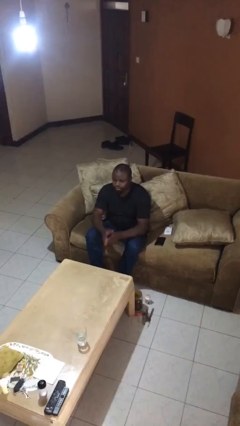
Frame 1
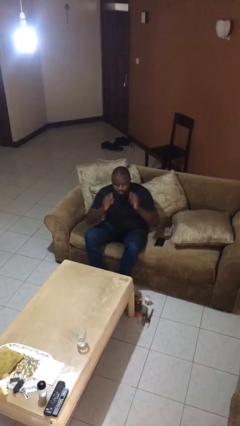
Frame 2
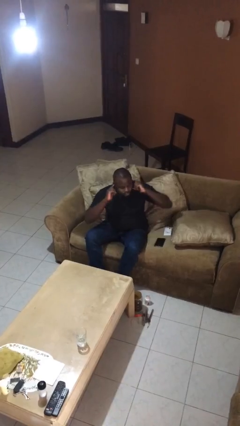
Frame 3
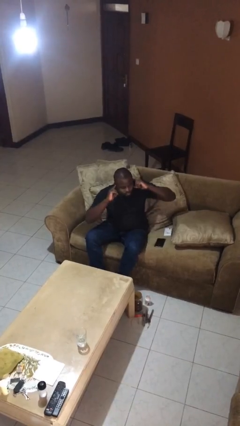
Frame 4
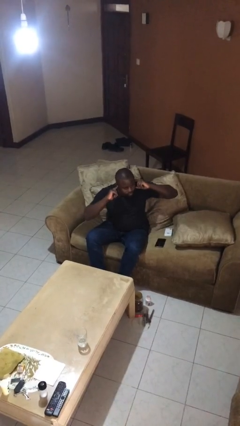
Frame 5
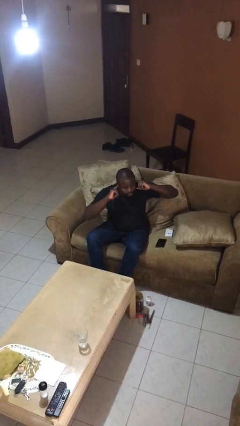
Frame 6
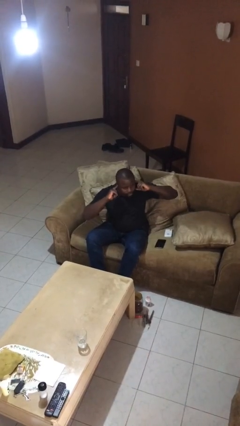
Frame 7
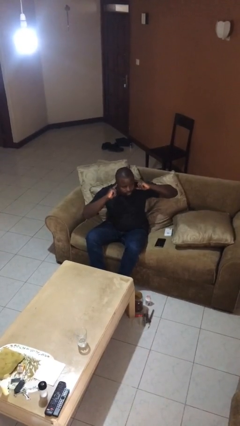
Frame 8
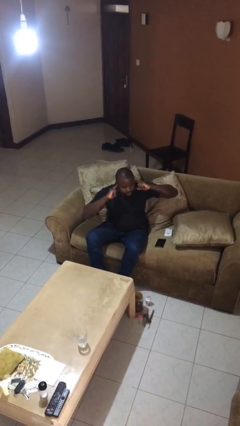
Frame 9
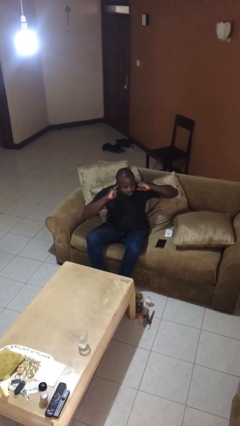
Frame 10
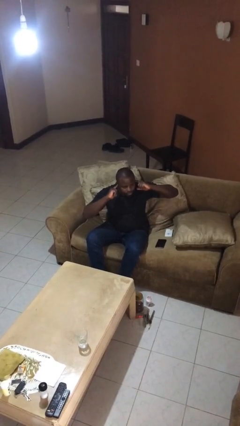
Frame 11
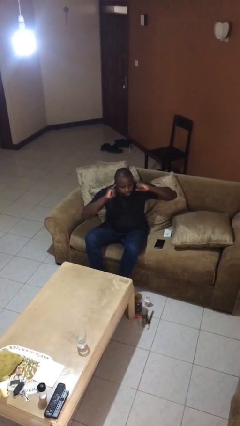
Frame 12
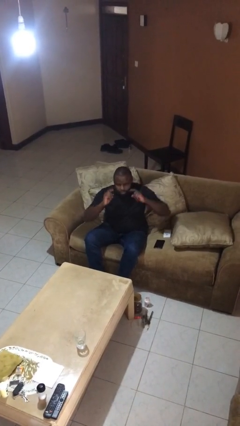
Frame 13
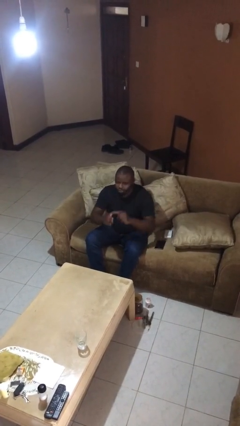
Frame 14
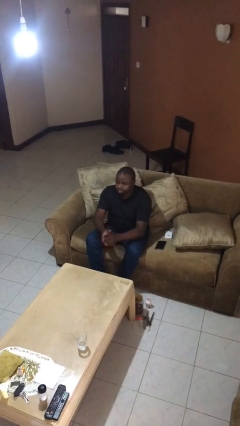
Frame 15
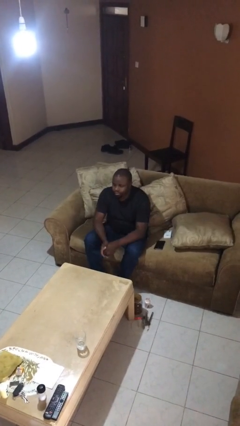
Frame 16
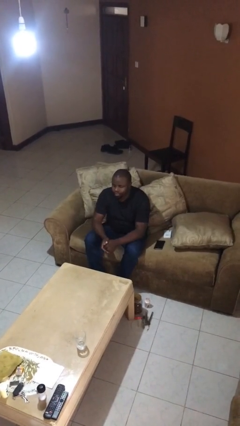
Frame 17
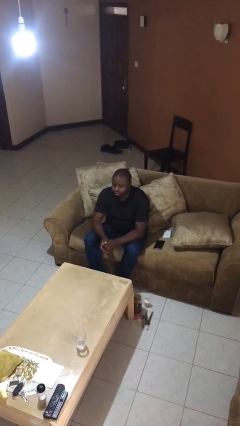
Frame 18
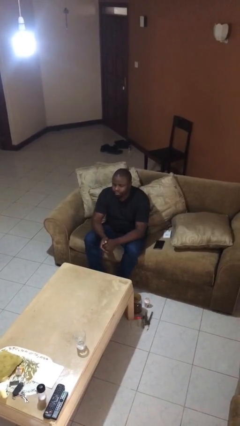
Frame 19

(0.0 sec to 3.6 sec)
person puts fingers in ear

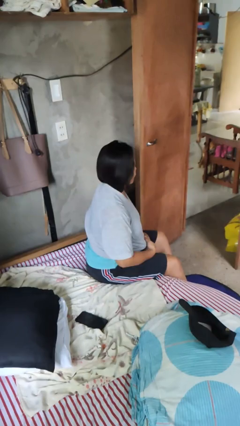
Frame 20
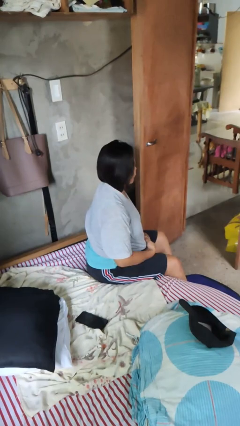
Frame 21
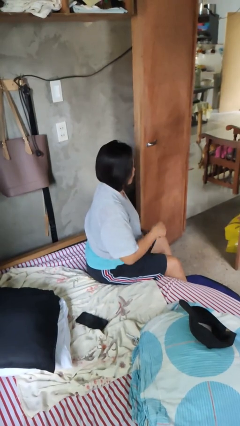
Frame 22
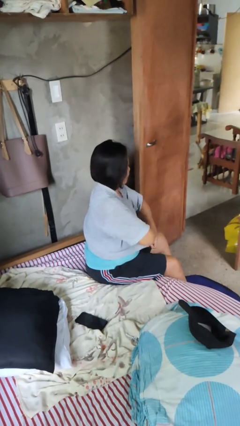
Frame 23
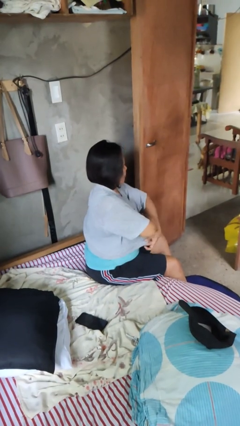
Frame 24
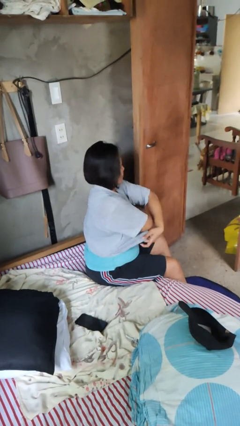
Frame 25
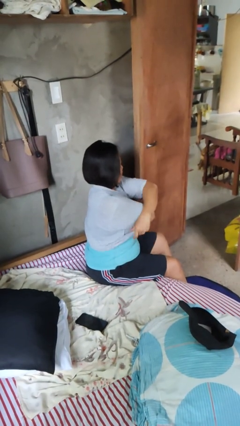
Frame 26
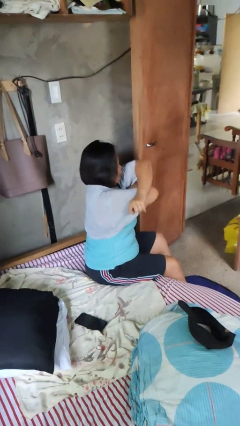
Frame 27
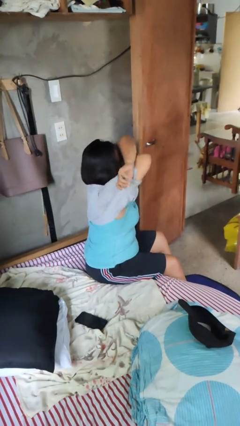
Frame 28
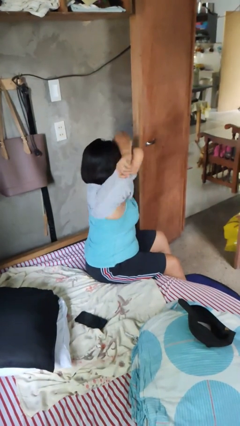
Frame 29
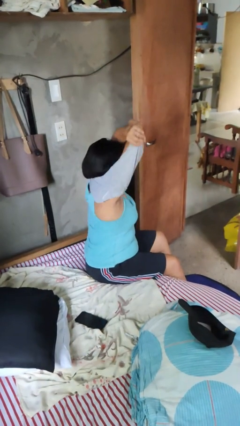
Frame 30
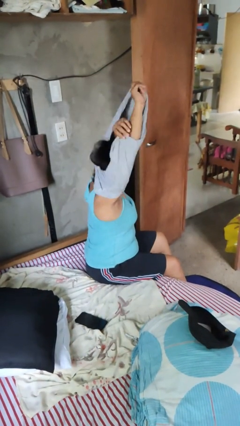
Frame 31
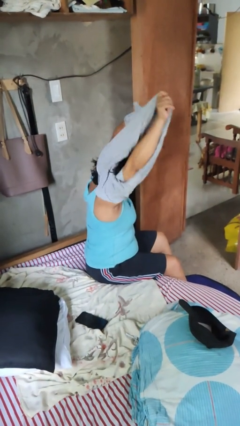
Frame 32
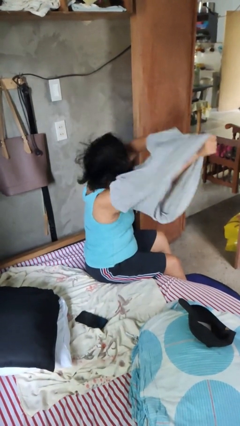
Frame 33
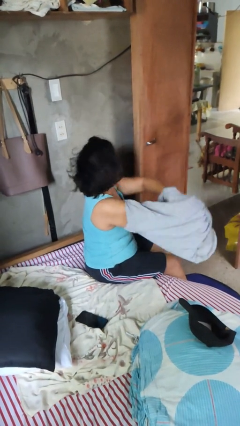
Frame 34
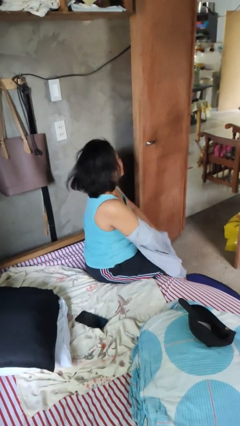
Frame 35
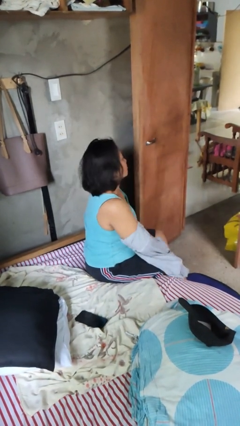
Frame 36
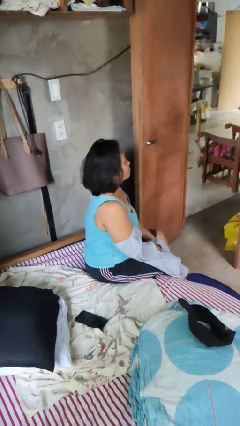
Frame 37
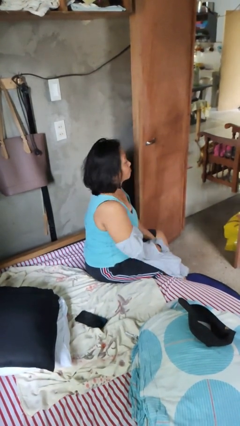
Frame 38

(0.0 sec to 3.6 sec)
person takes off shirt

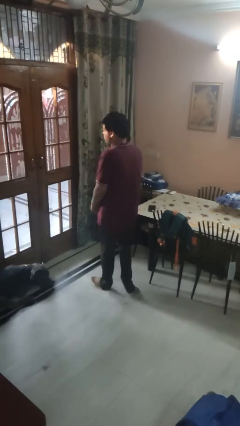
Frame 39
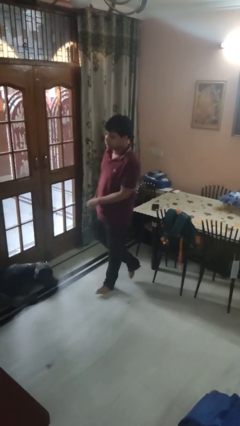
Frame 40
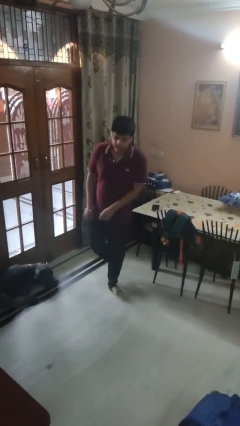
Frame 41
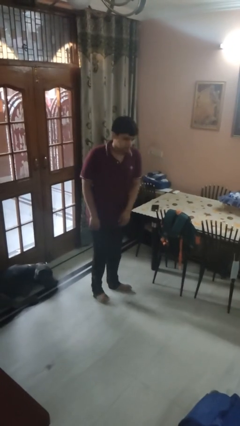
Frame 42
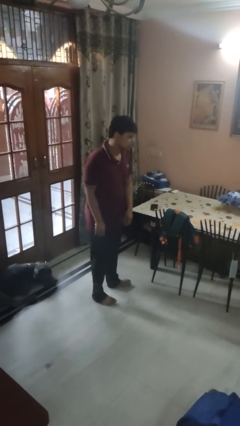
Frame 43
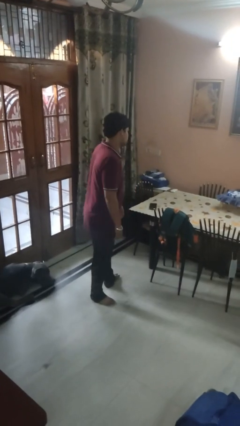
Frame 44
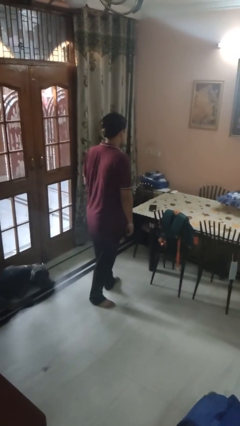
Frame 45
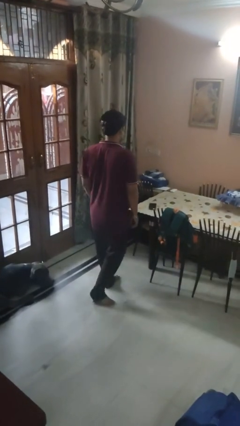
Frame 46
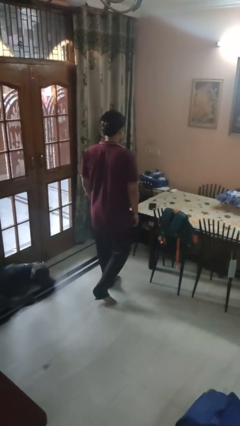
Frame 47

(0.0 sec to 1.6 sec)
person twirls

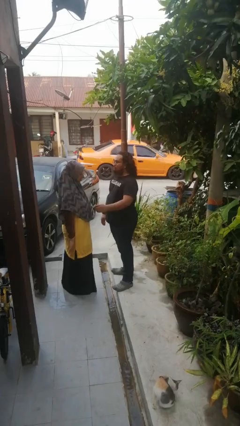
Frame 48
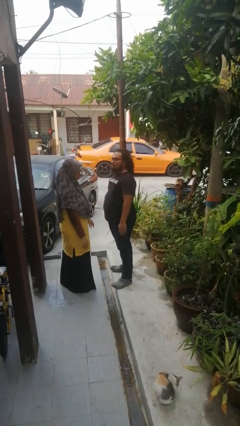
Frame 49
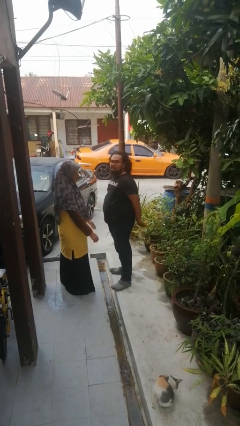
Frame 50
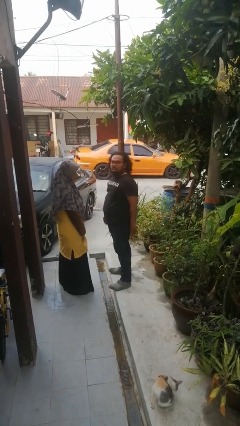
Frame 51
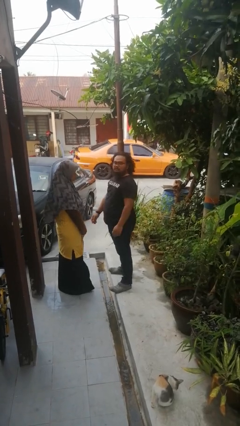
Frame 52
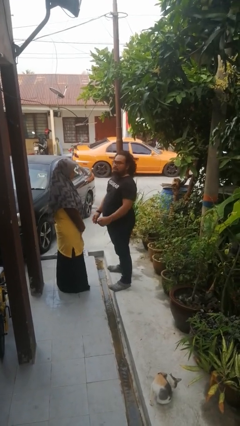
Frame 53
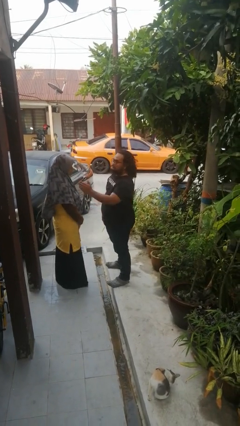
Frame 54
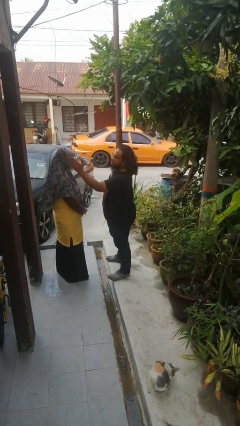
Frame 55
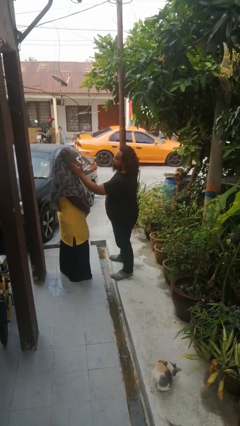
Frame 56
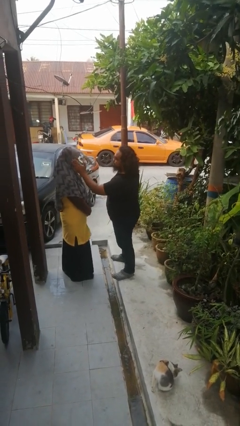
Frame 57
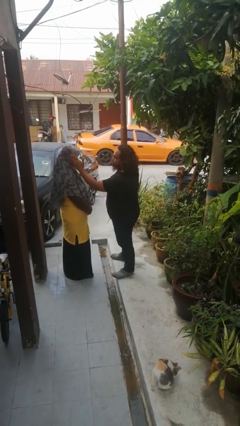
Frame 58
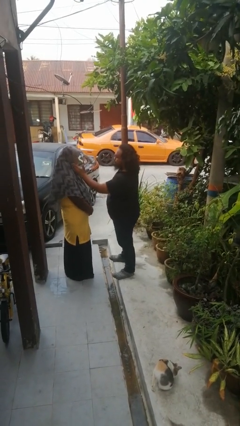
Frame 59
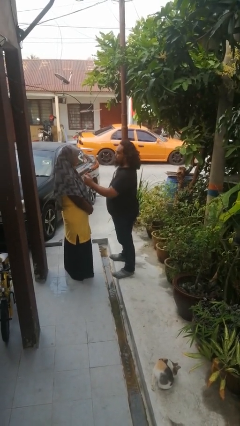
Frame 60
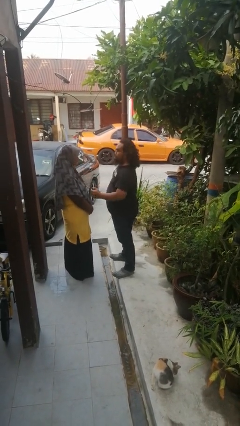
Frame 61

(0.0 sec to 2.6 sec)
person touches face of person

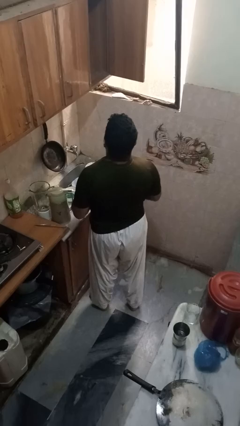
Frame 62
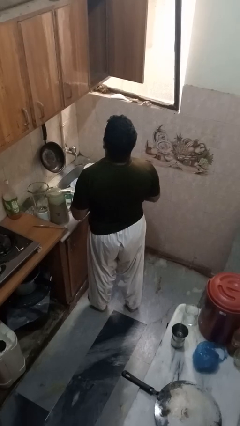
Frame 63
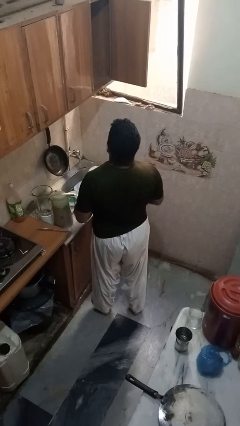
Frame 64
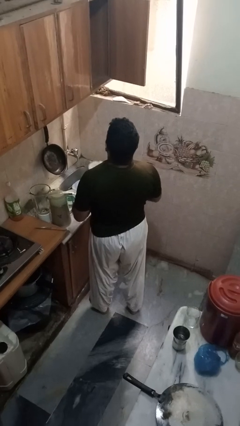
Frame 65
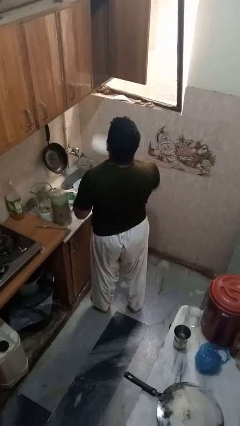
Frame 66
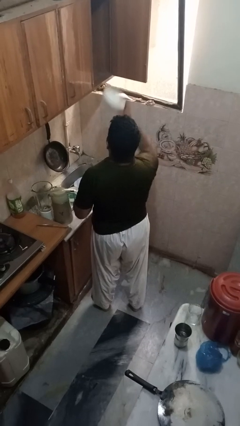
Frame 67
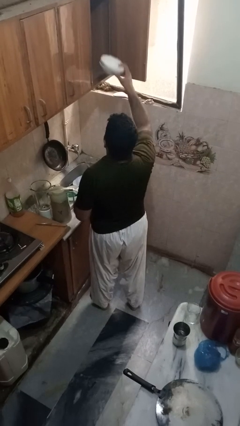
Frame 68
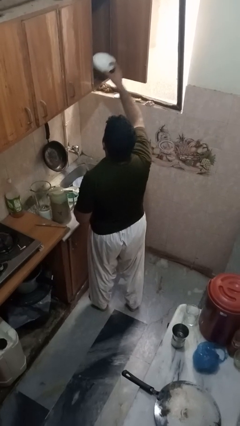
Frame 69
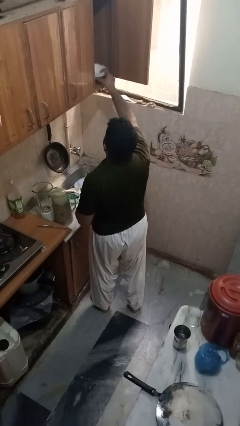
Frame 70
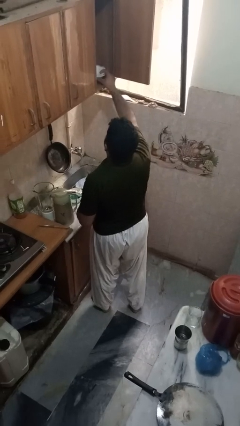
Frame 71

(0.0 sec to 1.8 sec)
person puts object in cabinet

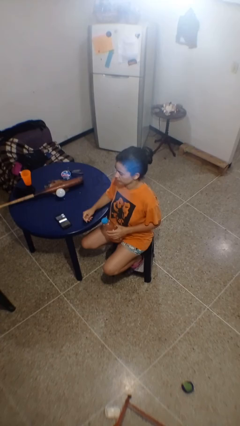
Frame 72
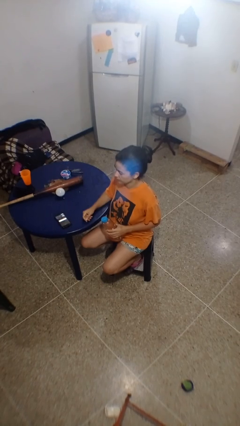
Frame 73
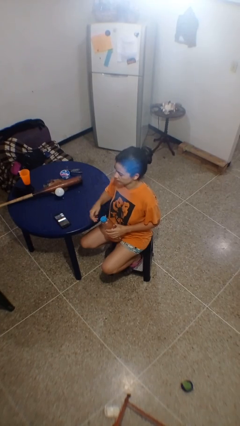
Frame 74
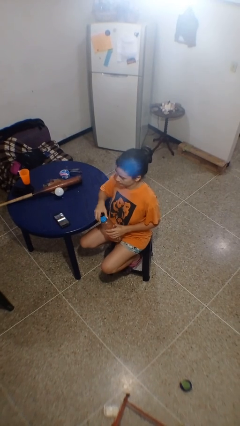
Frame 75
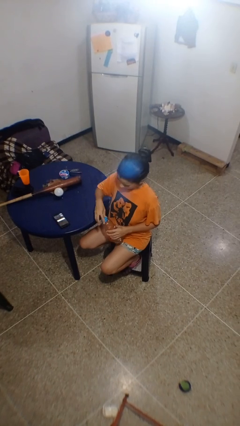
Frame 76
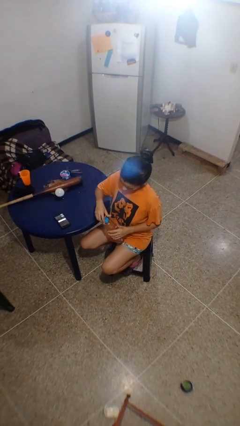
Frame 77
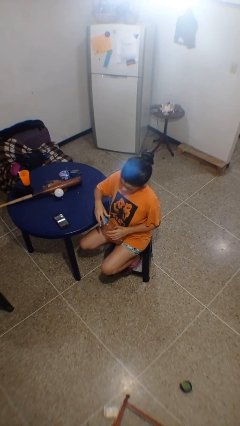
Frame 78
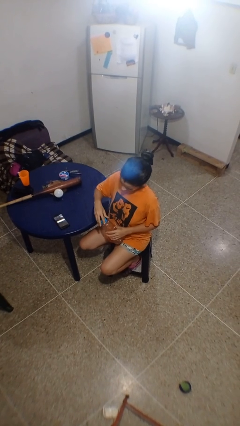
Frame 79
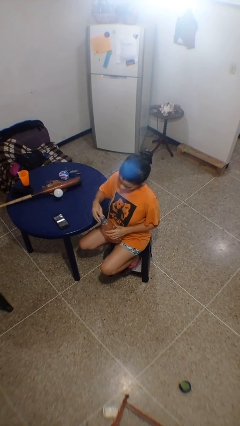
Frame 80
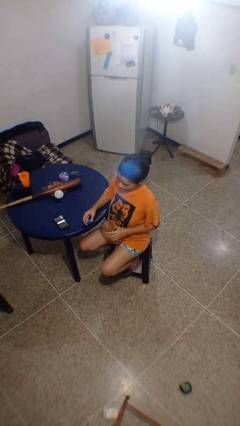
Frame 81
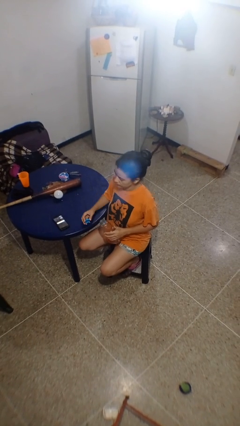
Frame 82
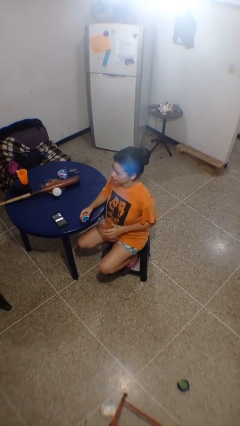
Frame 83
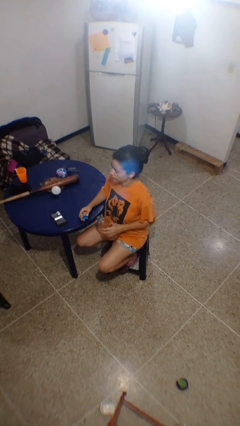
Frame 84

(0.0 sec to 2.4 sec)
person unscrews lid from bottle

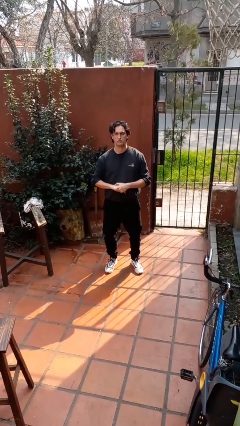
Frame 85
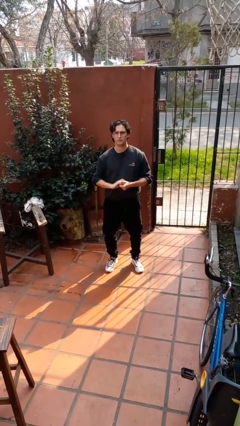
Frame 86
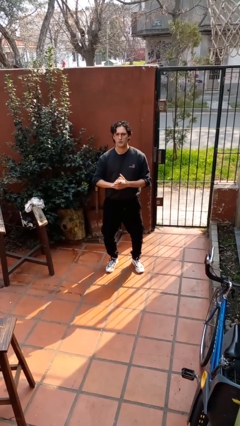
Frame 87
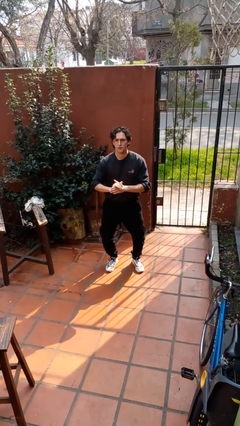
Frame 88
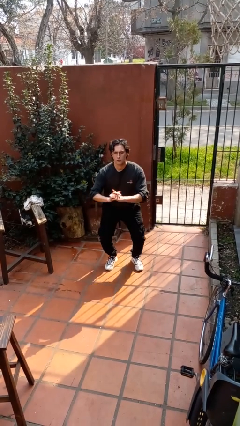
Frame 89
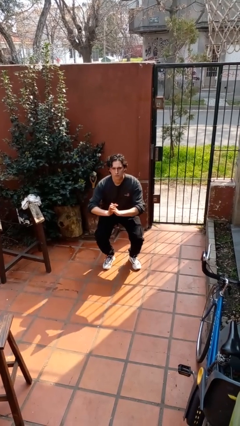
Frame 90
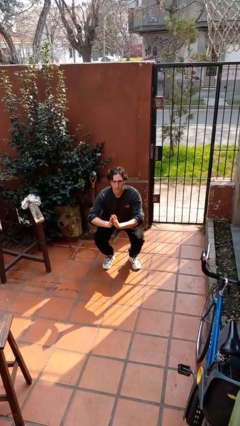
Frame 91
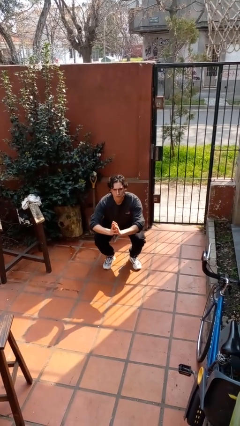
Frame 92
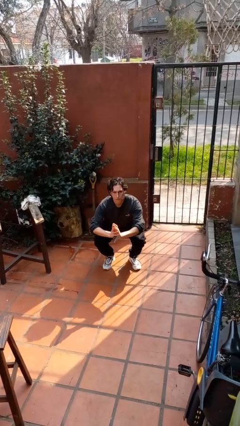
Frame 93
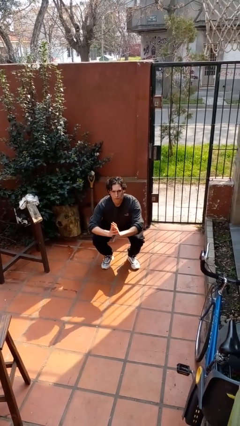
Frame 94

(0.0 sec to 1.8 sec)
person squats
